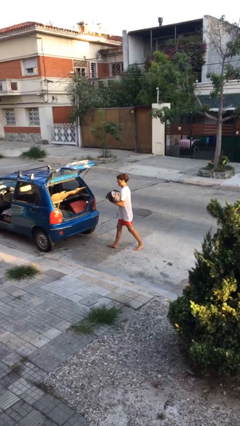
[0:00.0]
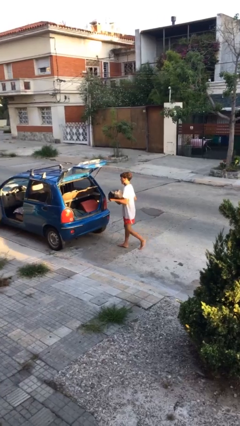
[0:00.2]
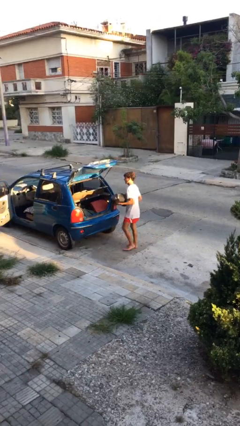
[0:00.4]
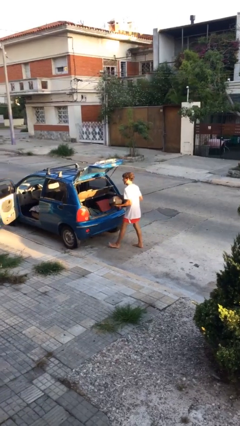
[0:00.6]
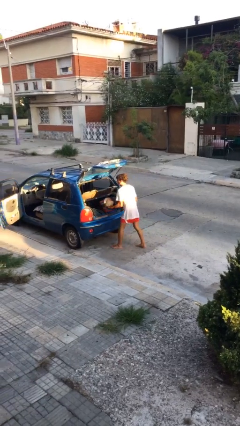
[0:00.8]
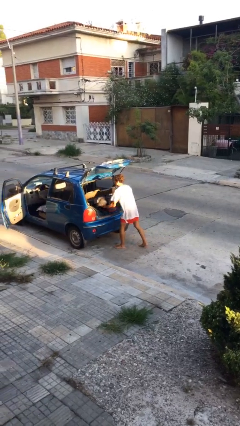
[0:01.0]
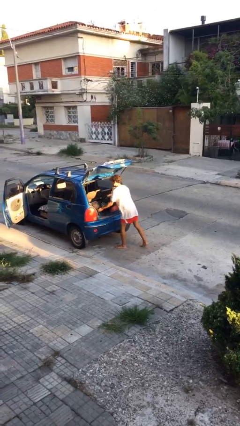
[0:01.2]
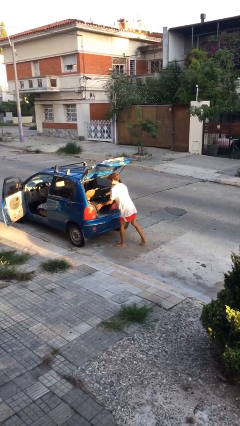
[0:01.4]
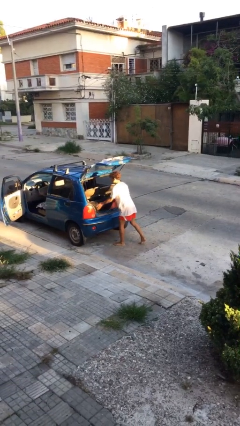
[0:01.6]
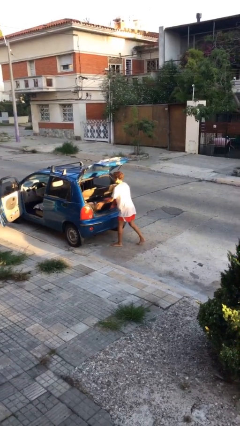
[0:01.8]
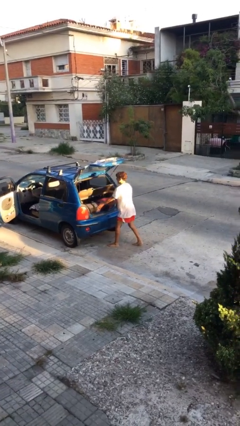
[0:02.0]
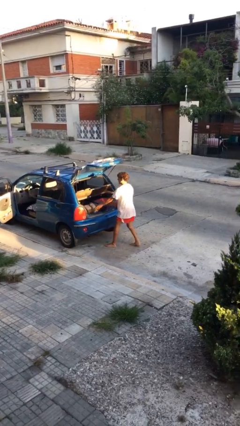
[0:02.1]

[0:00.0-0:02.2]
person loads car

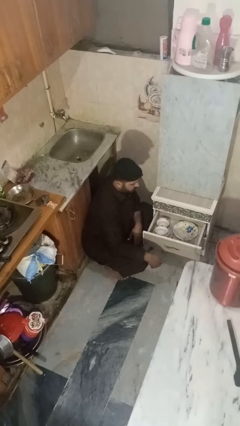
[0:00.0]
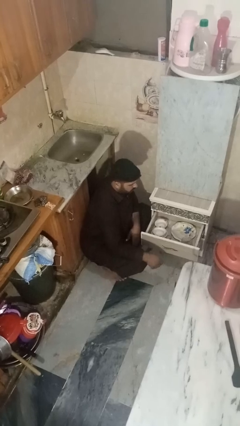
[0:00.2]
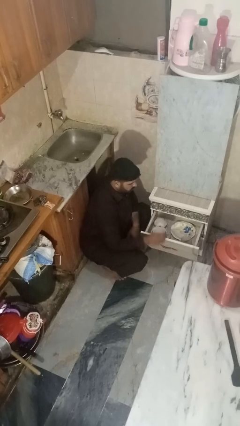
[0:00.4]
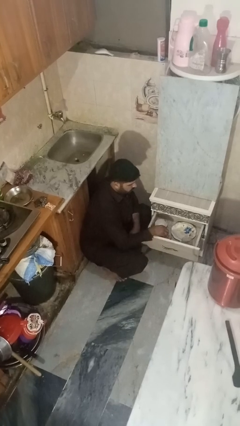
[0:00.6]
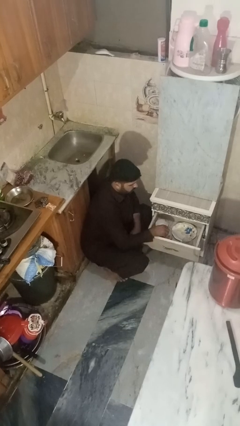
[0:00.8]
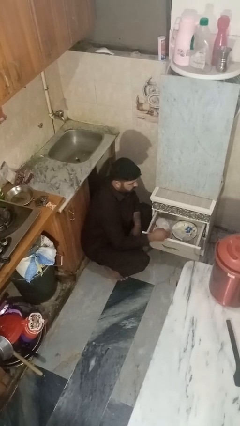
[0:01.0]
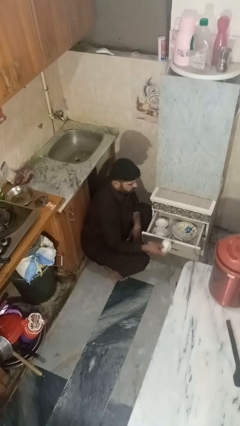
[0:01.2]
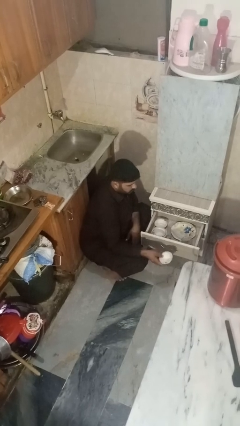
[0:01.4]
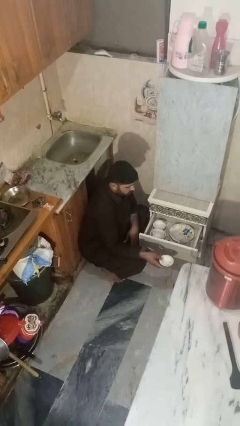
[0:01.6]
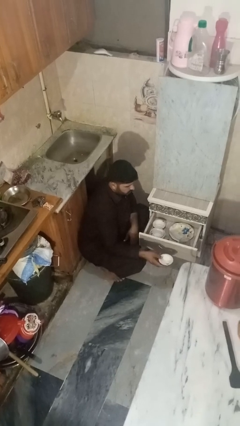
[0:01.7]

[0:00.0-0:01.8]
person takes object from kitchen drawer

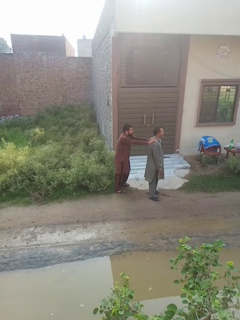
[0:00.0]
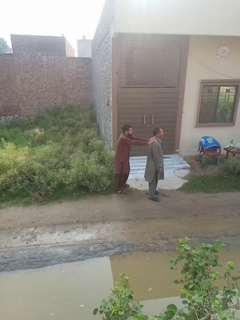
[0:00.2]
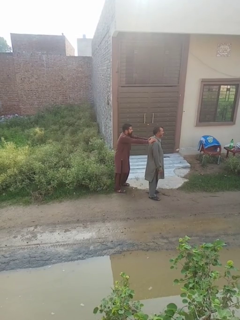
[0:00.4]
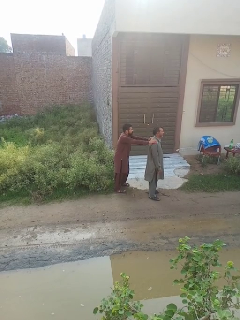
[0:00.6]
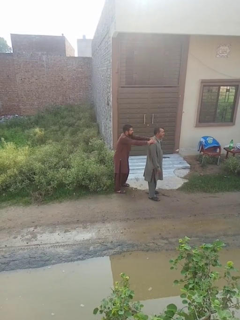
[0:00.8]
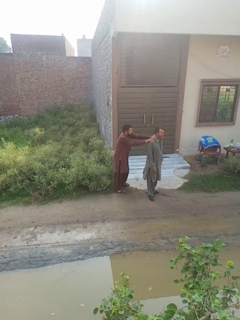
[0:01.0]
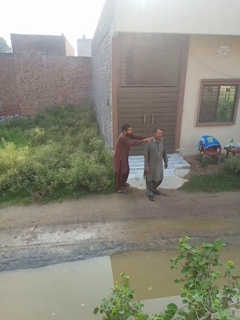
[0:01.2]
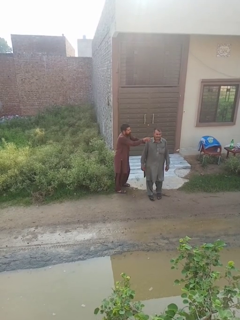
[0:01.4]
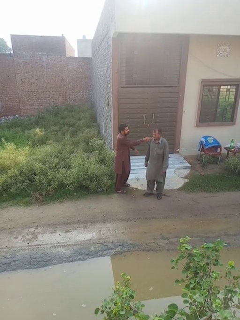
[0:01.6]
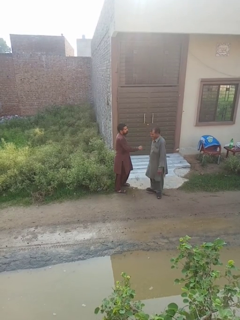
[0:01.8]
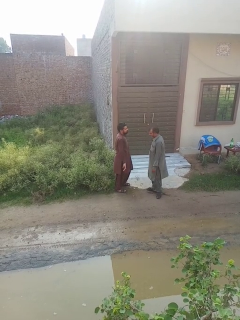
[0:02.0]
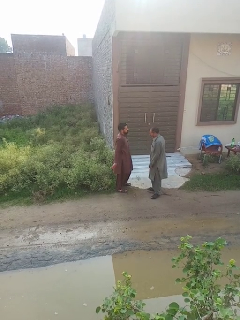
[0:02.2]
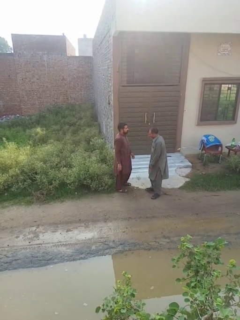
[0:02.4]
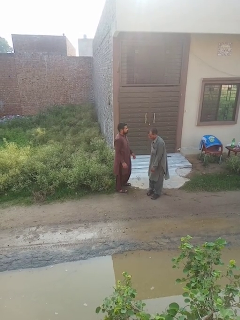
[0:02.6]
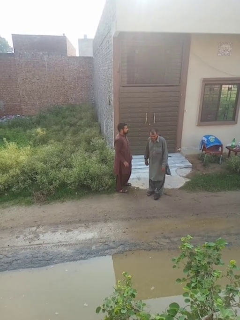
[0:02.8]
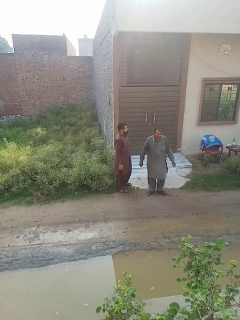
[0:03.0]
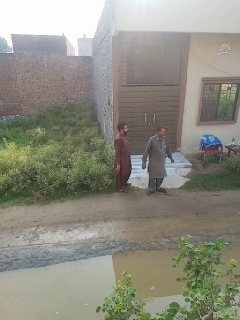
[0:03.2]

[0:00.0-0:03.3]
person spins person around

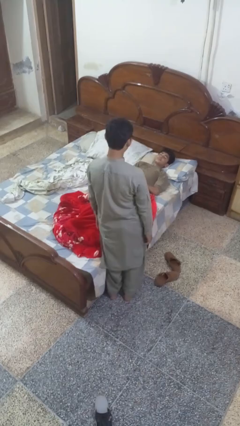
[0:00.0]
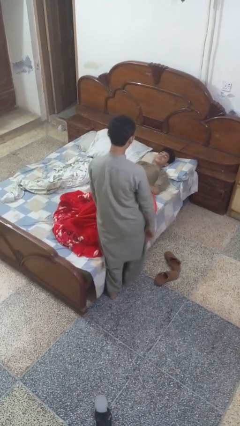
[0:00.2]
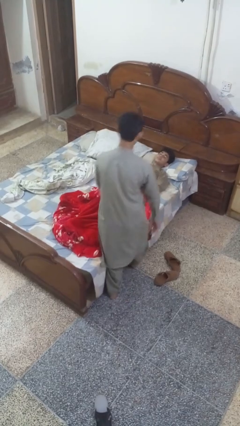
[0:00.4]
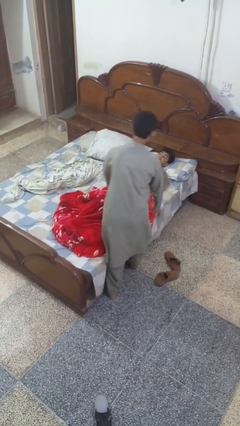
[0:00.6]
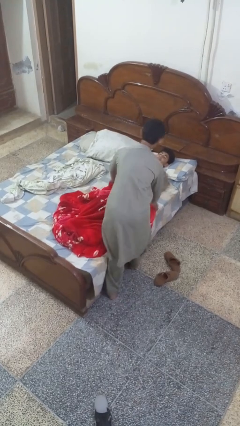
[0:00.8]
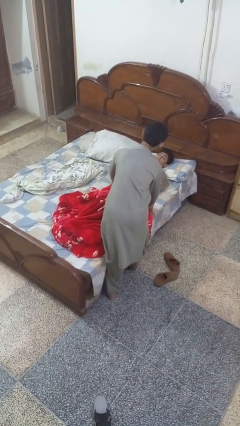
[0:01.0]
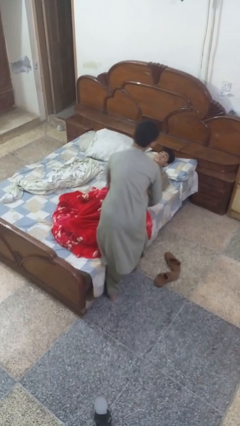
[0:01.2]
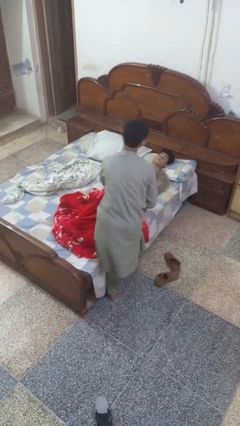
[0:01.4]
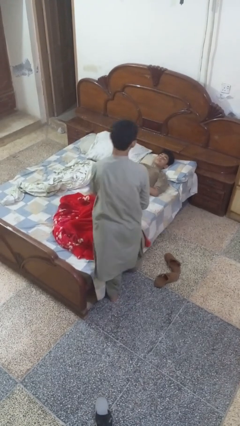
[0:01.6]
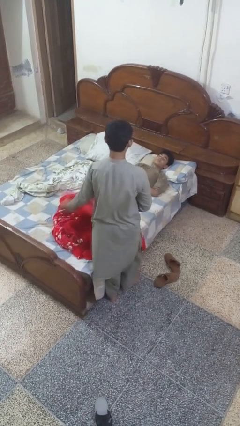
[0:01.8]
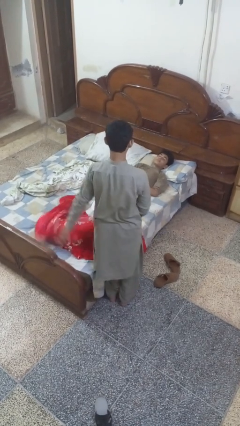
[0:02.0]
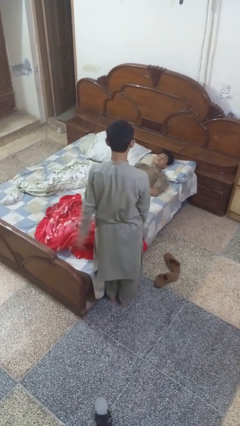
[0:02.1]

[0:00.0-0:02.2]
person uncovers friend with blanket

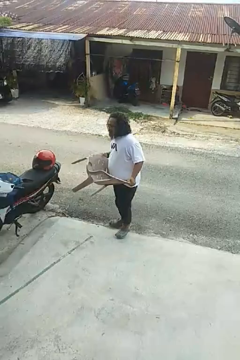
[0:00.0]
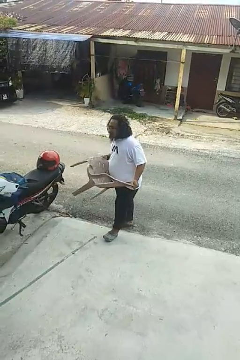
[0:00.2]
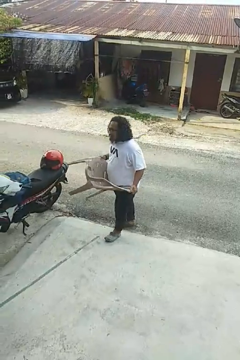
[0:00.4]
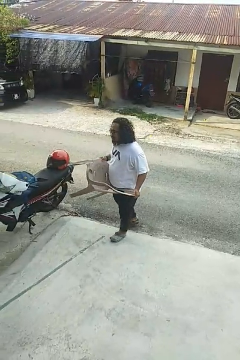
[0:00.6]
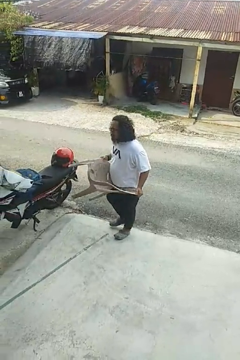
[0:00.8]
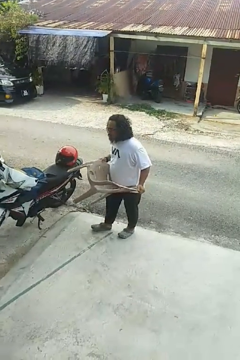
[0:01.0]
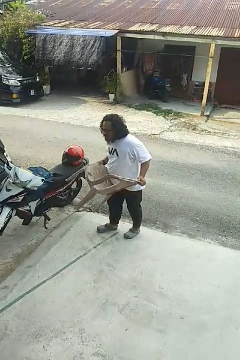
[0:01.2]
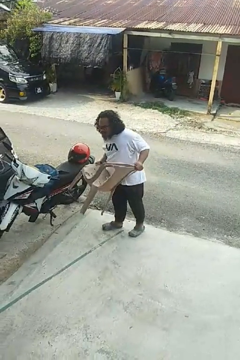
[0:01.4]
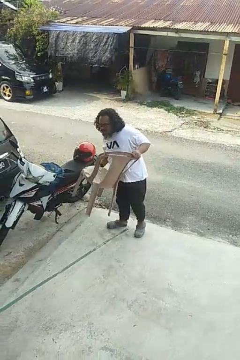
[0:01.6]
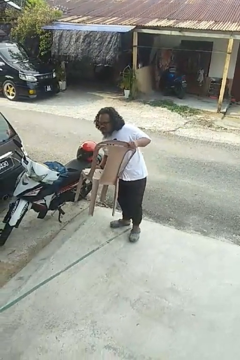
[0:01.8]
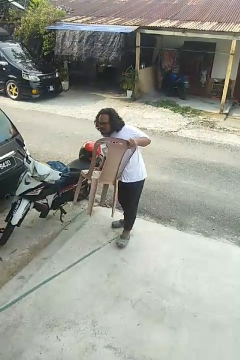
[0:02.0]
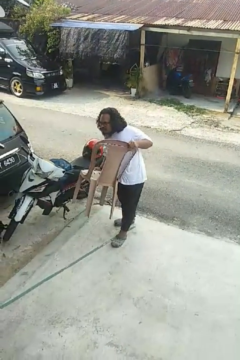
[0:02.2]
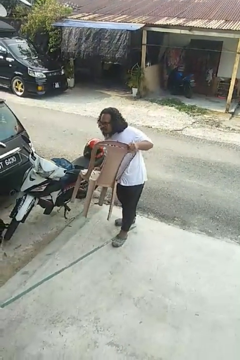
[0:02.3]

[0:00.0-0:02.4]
person carries furniture

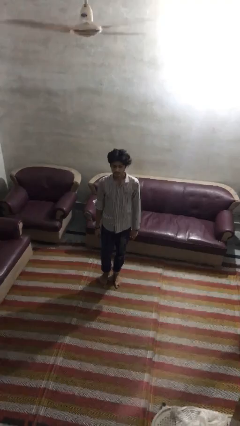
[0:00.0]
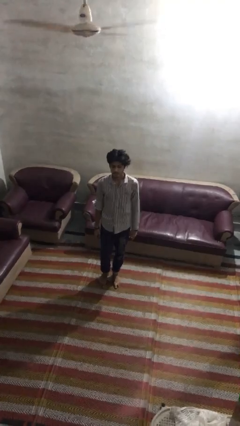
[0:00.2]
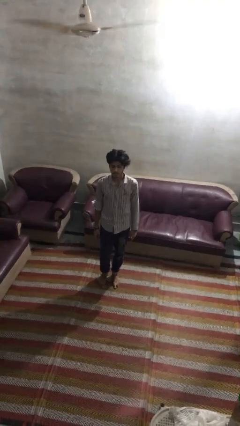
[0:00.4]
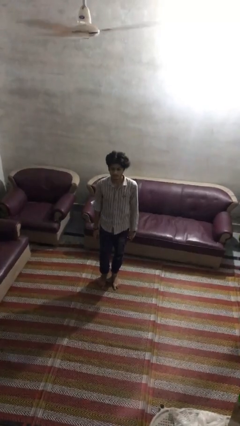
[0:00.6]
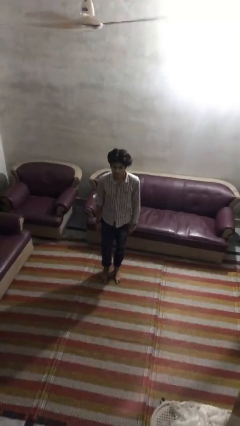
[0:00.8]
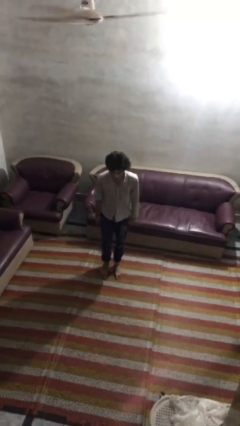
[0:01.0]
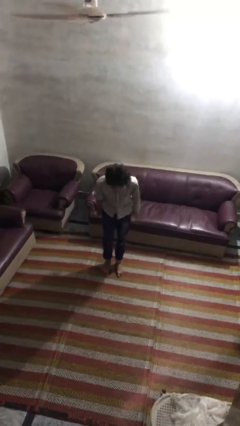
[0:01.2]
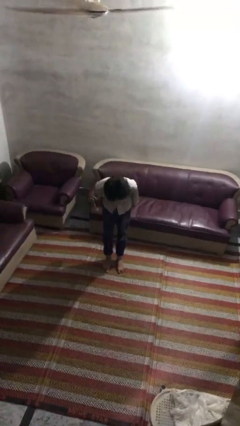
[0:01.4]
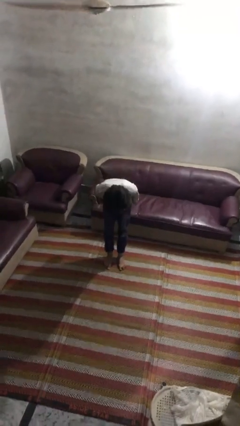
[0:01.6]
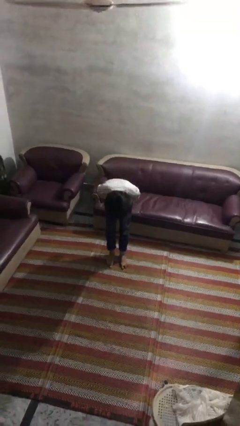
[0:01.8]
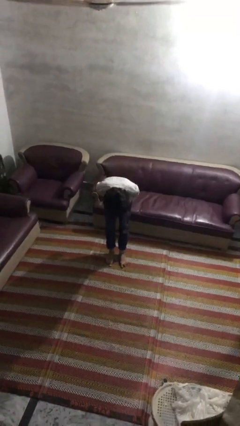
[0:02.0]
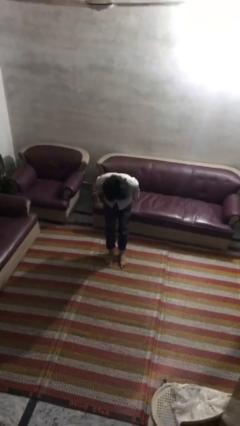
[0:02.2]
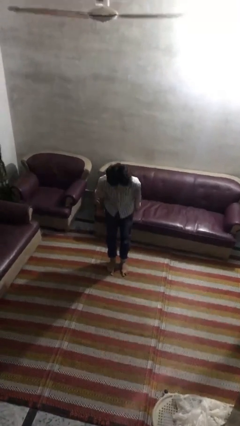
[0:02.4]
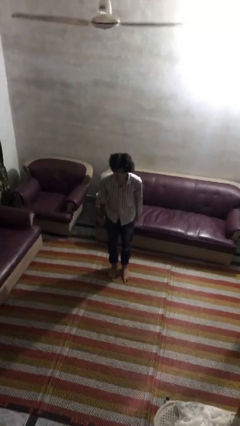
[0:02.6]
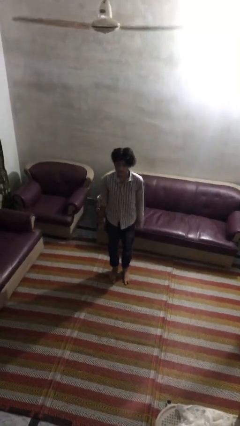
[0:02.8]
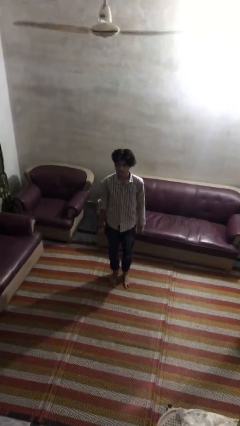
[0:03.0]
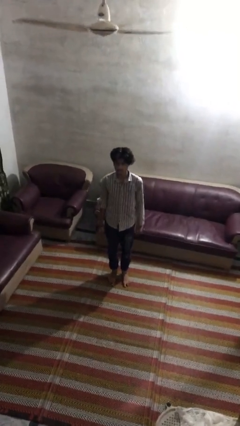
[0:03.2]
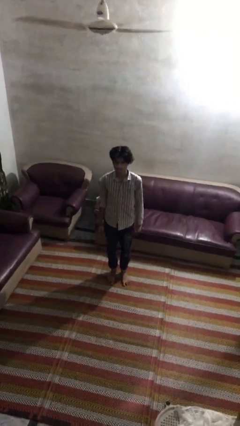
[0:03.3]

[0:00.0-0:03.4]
person bows

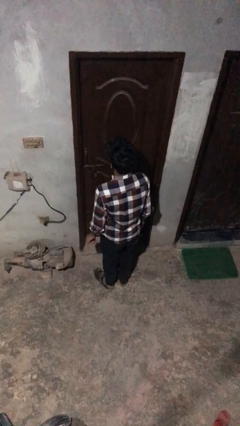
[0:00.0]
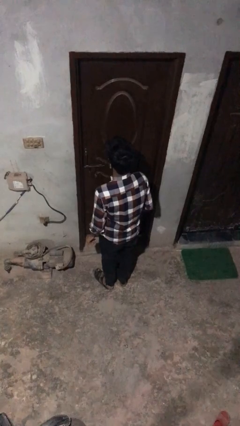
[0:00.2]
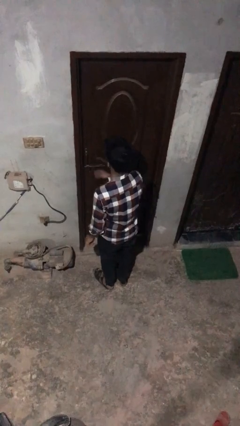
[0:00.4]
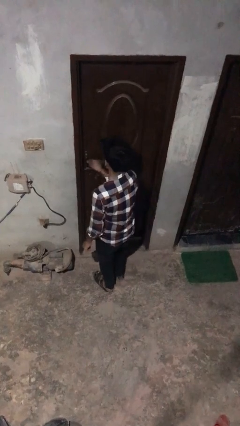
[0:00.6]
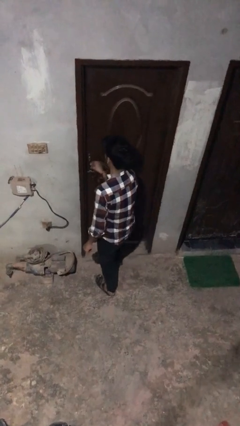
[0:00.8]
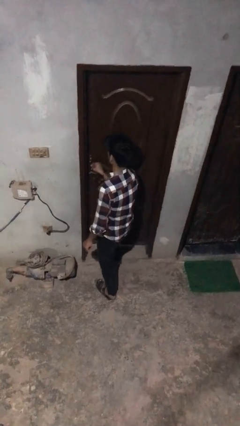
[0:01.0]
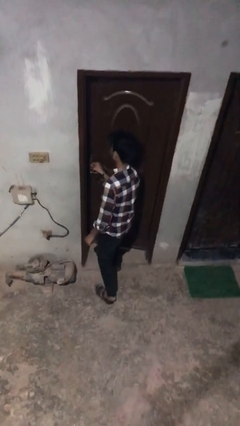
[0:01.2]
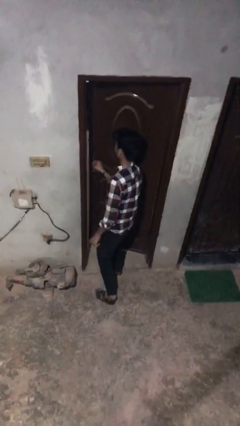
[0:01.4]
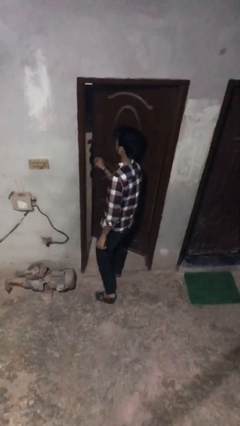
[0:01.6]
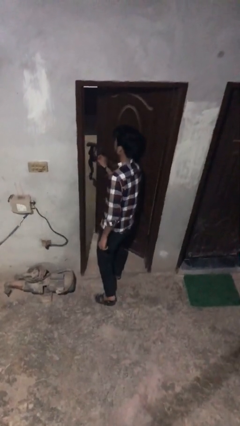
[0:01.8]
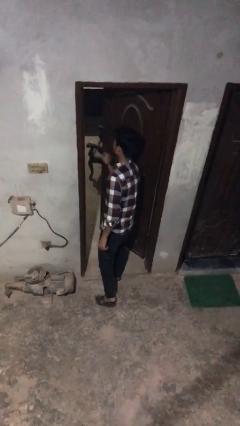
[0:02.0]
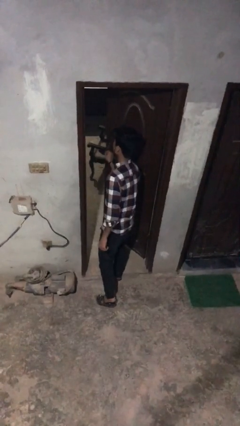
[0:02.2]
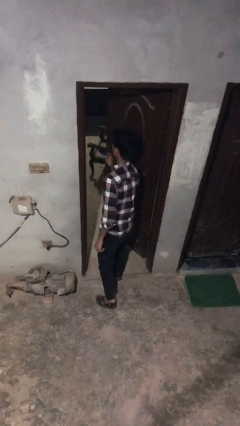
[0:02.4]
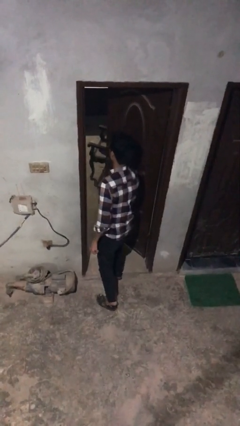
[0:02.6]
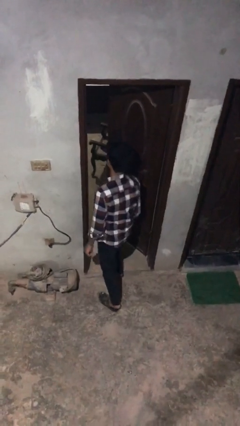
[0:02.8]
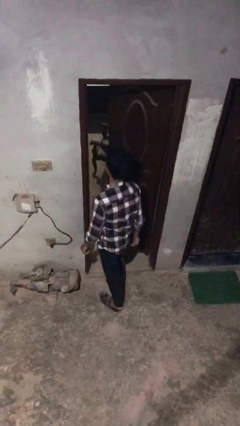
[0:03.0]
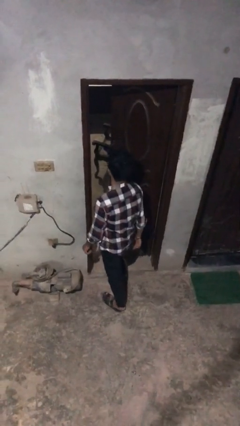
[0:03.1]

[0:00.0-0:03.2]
person opens facility door
